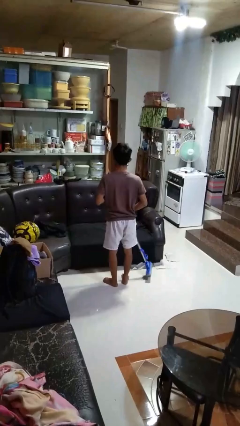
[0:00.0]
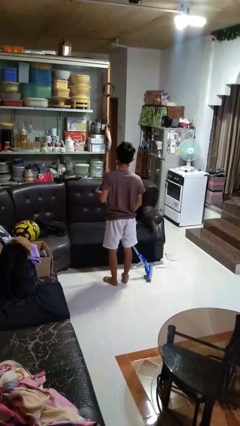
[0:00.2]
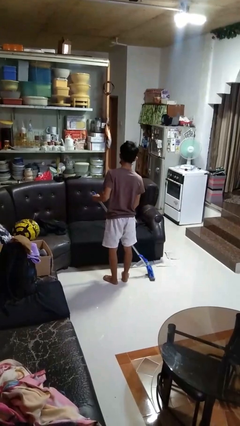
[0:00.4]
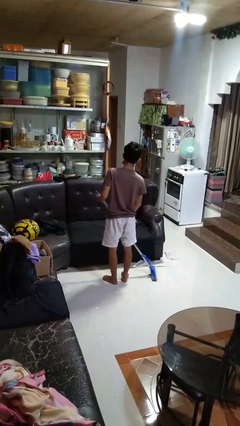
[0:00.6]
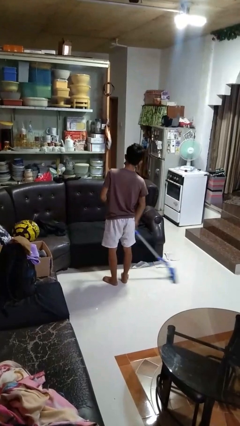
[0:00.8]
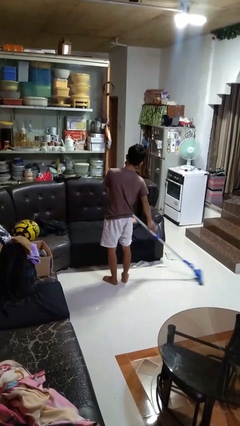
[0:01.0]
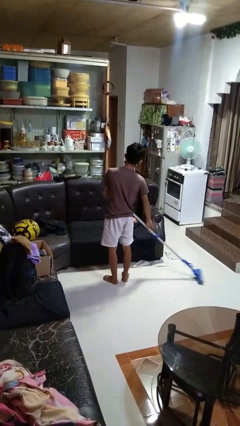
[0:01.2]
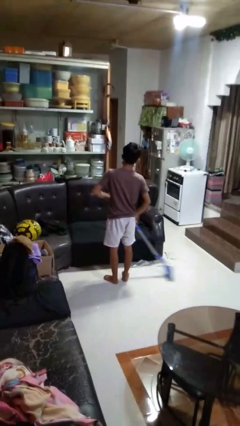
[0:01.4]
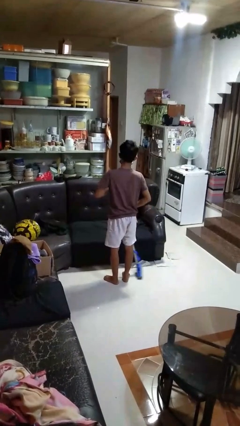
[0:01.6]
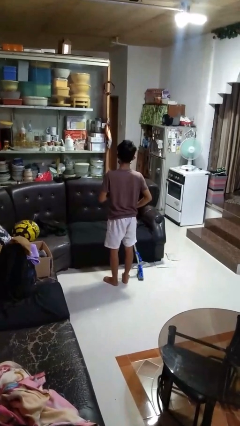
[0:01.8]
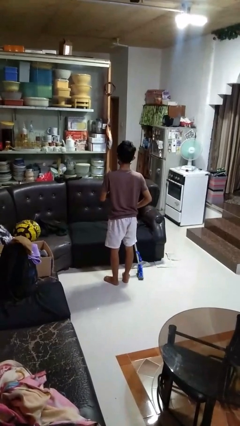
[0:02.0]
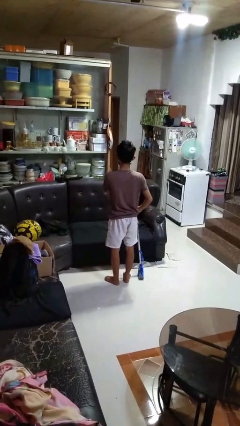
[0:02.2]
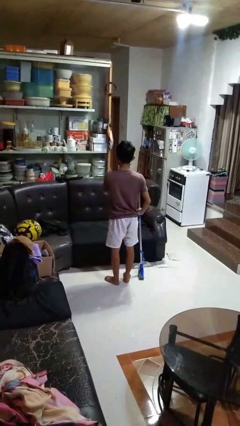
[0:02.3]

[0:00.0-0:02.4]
person mops

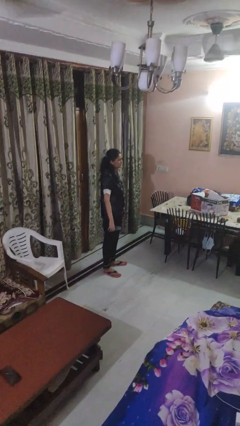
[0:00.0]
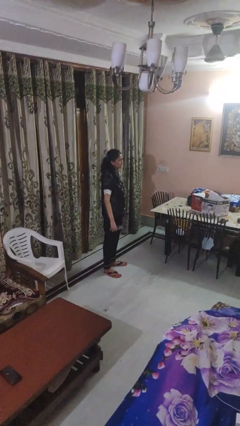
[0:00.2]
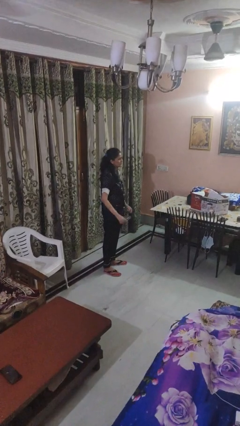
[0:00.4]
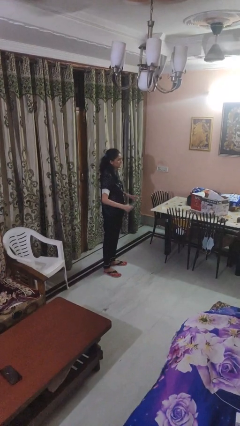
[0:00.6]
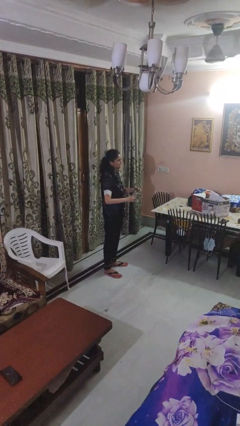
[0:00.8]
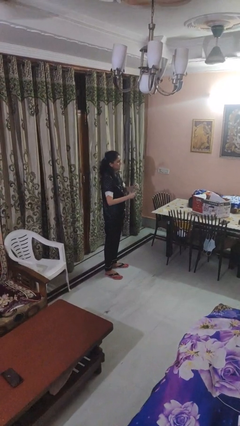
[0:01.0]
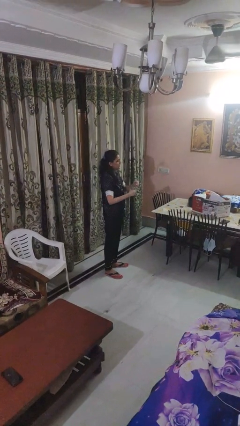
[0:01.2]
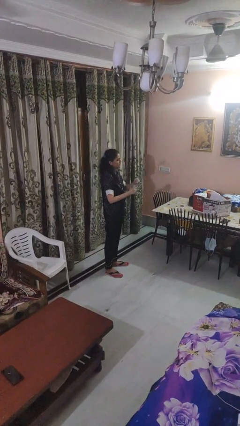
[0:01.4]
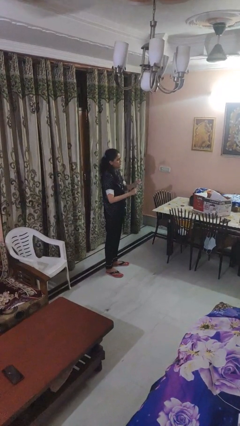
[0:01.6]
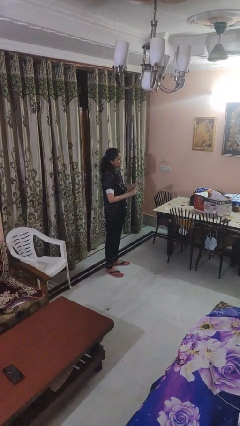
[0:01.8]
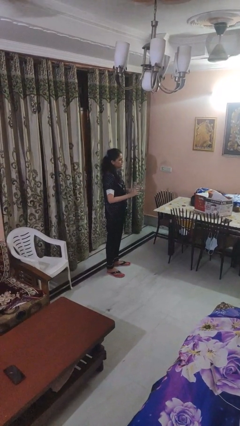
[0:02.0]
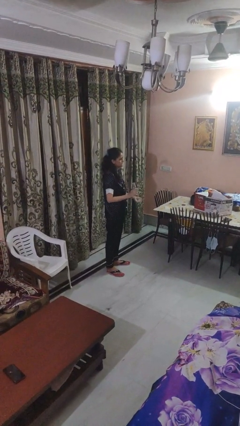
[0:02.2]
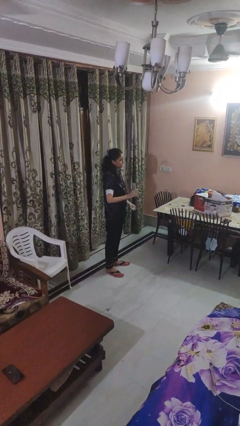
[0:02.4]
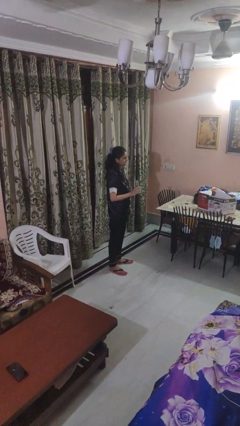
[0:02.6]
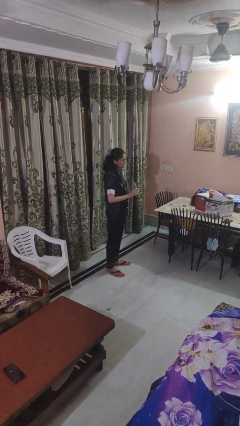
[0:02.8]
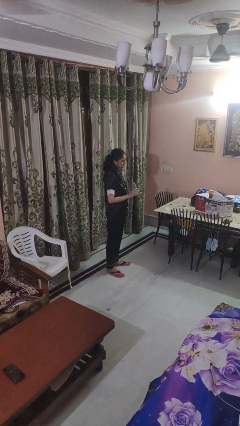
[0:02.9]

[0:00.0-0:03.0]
person unscrews lid from bottle

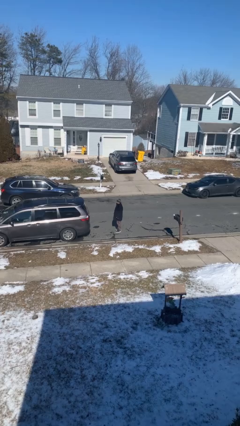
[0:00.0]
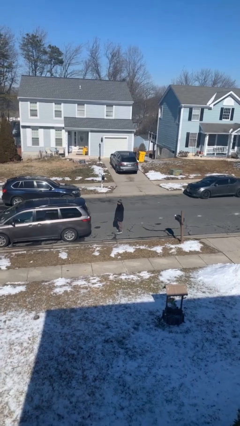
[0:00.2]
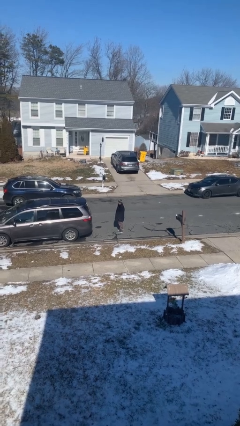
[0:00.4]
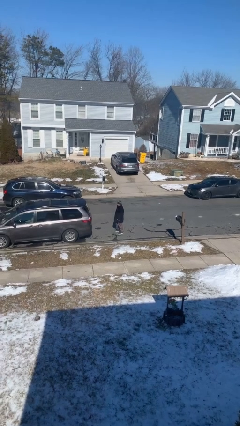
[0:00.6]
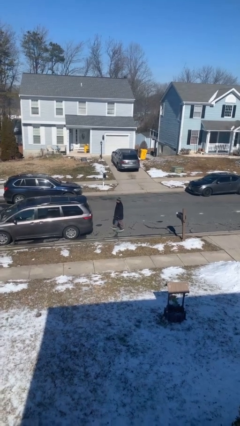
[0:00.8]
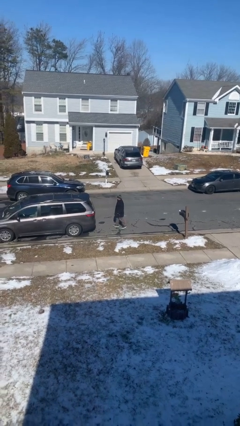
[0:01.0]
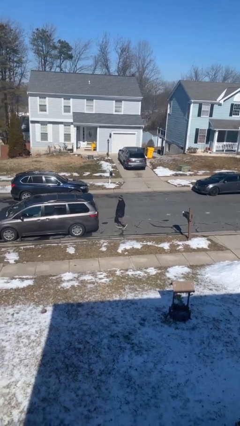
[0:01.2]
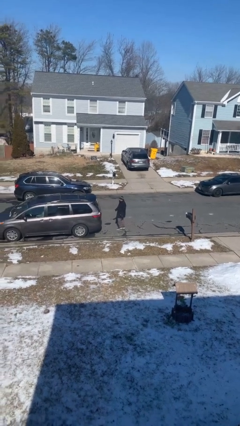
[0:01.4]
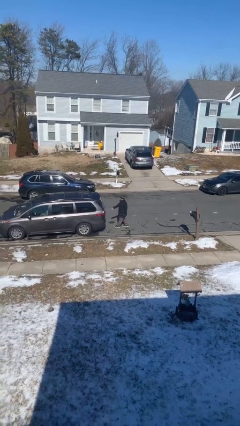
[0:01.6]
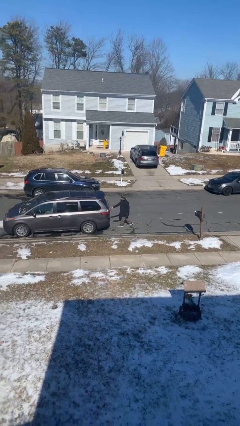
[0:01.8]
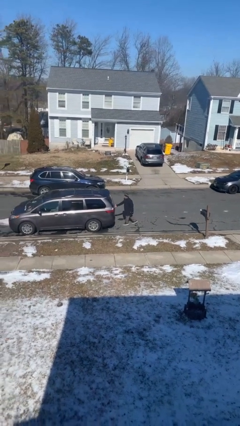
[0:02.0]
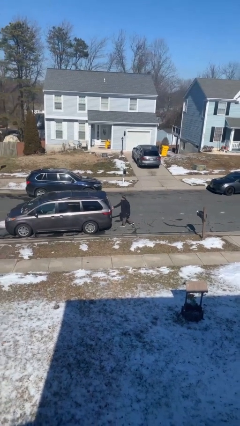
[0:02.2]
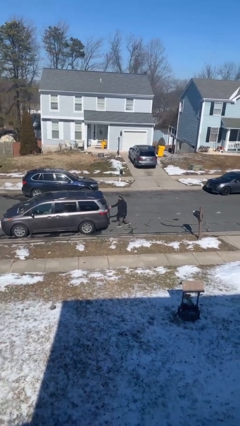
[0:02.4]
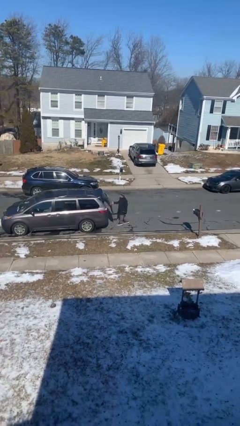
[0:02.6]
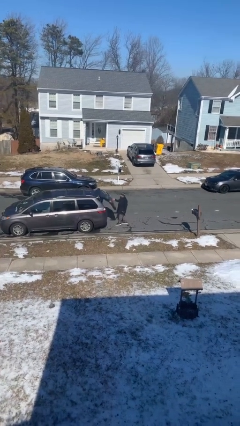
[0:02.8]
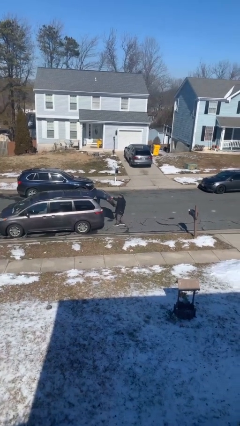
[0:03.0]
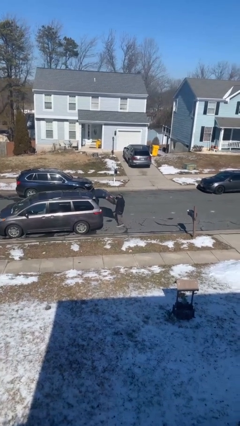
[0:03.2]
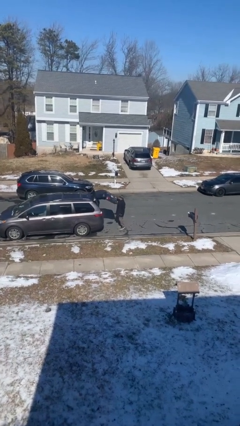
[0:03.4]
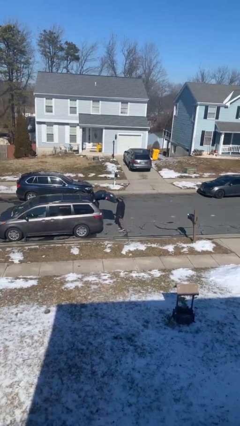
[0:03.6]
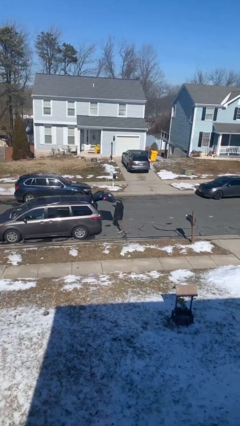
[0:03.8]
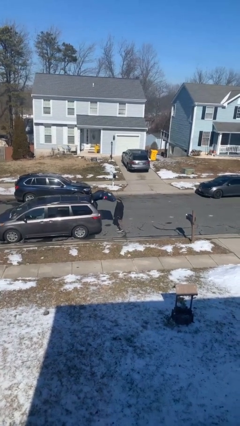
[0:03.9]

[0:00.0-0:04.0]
person opens car trunk

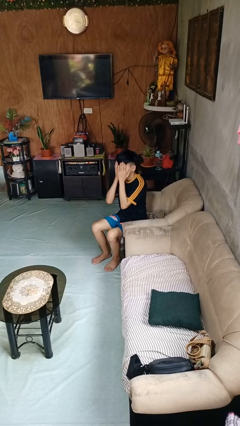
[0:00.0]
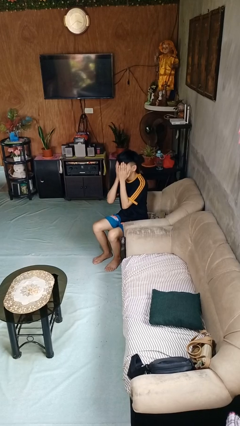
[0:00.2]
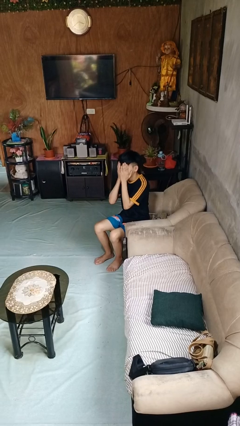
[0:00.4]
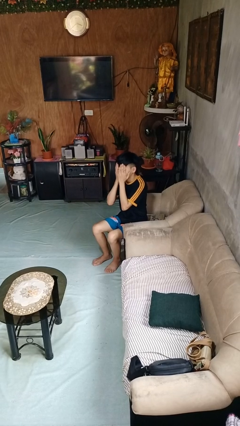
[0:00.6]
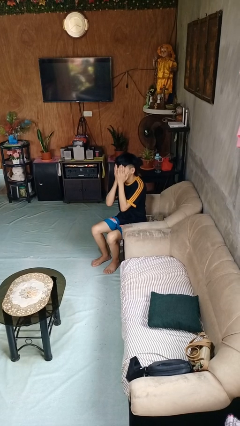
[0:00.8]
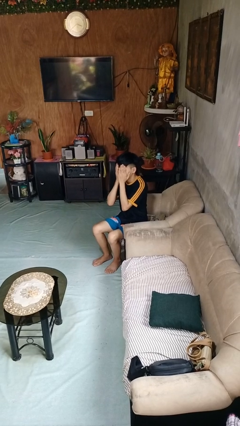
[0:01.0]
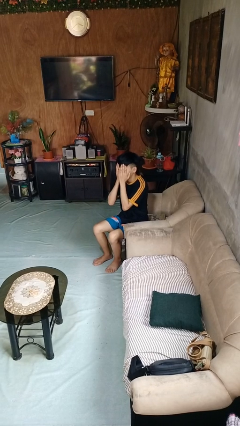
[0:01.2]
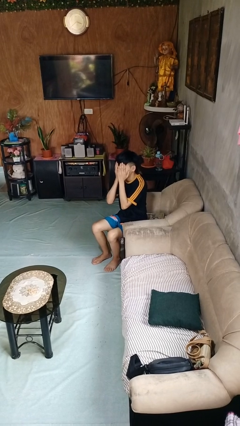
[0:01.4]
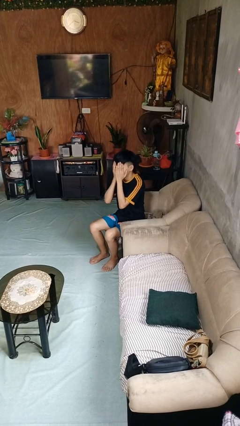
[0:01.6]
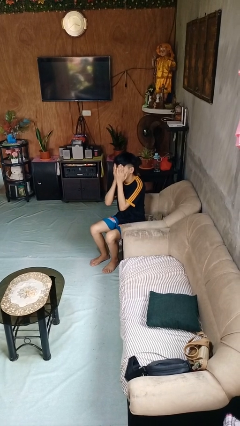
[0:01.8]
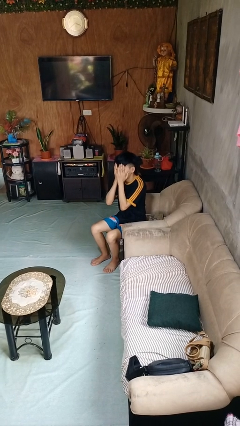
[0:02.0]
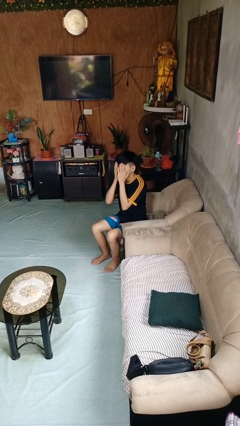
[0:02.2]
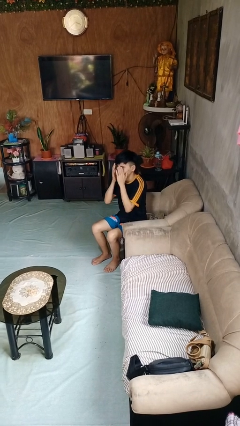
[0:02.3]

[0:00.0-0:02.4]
person covers face with hands

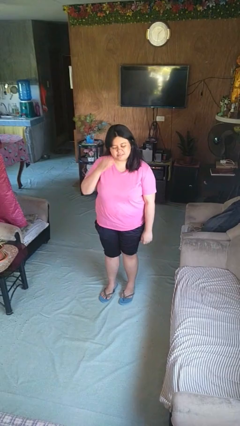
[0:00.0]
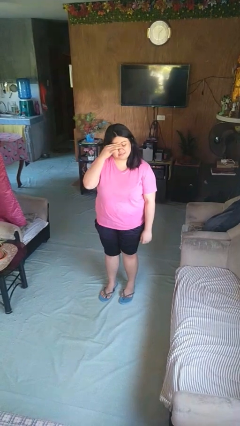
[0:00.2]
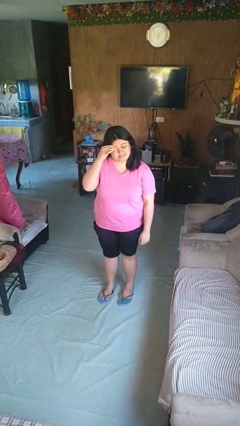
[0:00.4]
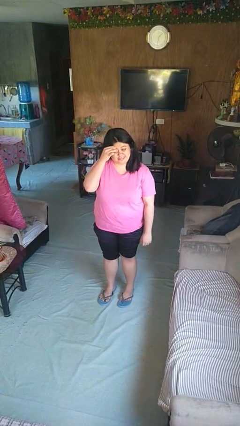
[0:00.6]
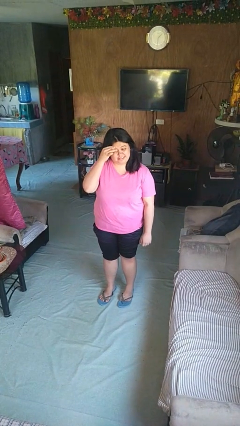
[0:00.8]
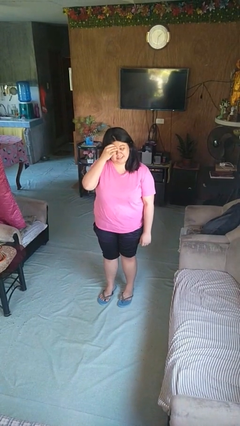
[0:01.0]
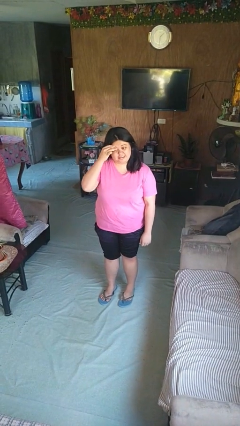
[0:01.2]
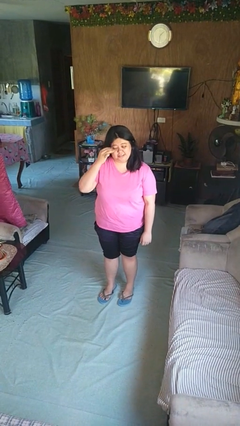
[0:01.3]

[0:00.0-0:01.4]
person scratches face

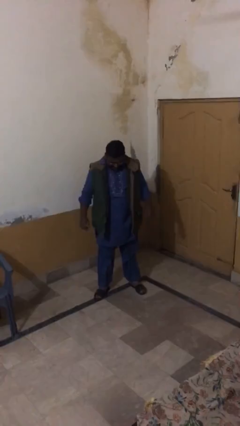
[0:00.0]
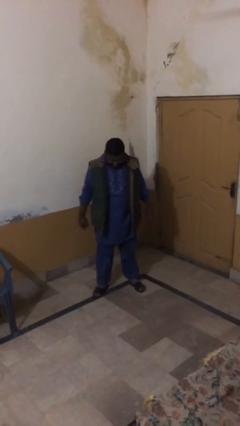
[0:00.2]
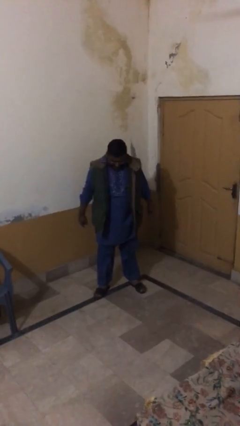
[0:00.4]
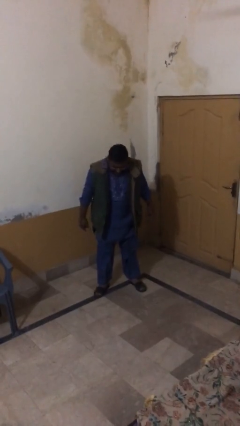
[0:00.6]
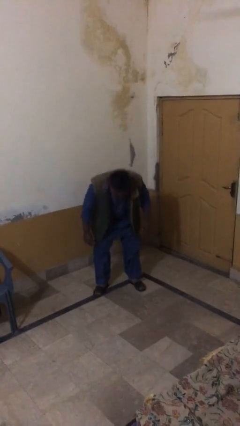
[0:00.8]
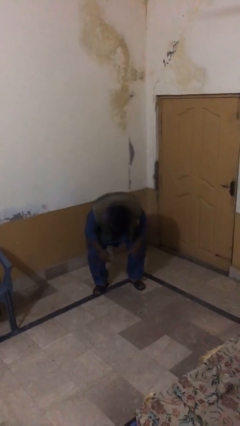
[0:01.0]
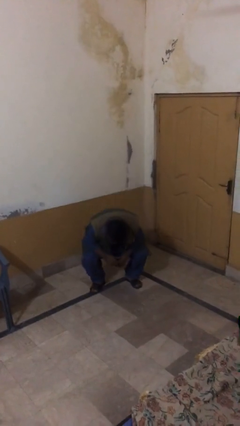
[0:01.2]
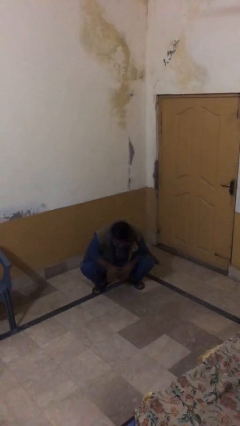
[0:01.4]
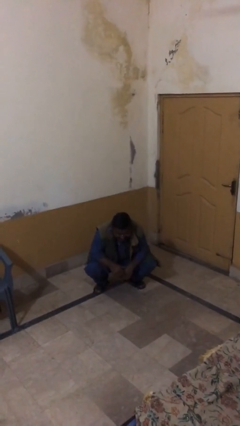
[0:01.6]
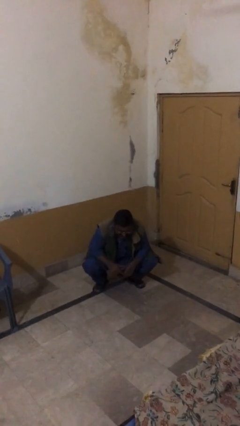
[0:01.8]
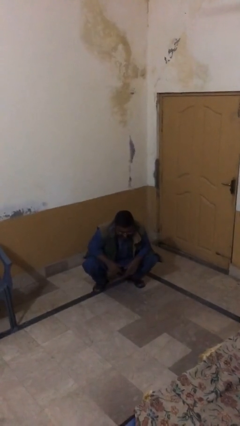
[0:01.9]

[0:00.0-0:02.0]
person sits down

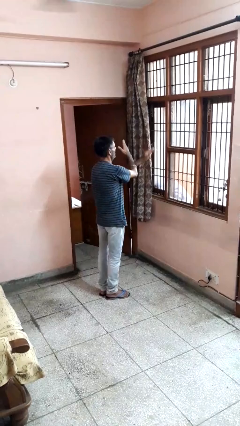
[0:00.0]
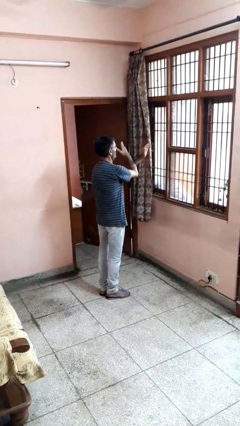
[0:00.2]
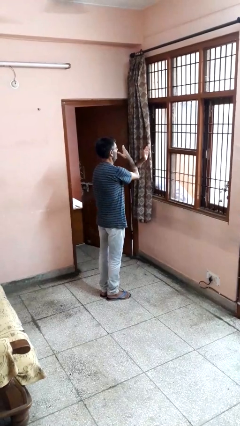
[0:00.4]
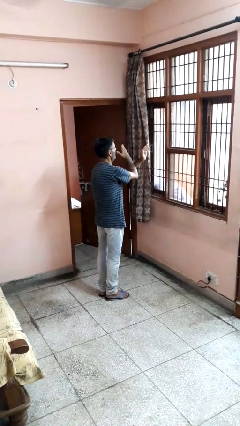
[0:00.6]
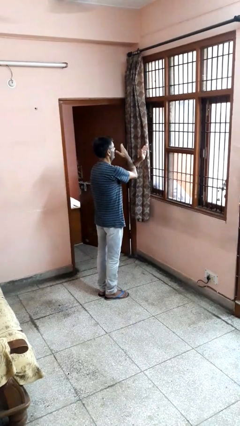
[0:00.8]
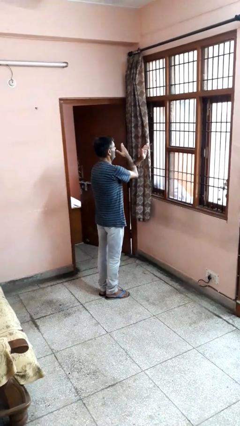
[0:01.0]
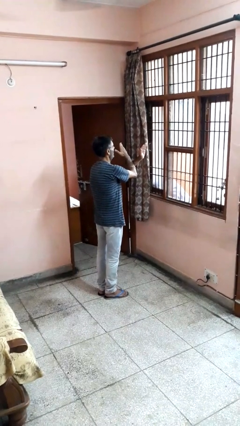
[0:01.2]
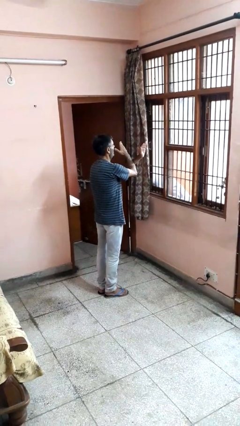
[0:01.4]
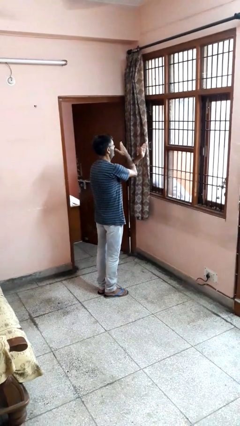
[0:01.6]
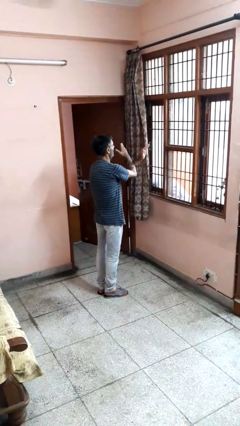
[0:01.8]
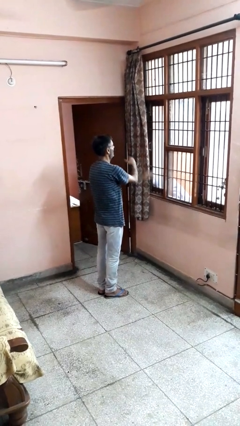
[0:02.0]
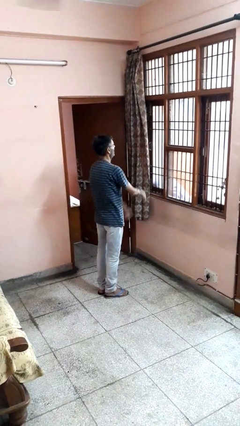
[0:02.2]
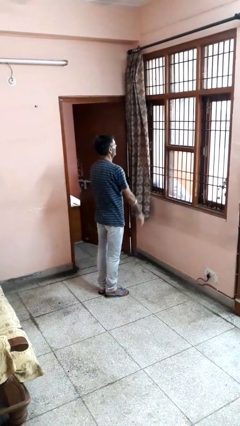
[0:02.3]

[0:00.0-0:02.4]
person gestures arms x
